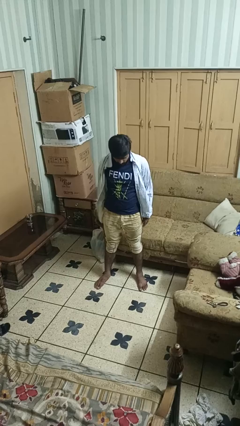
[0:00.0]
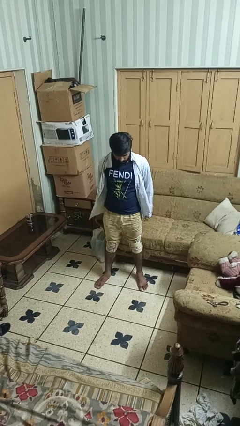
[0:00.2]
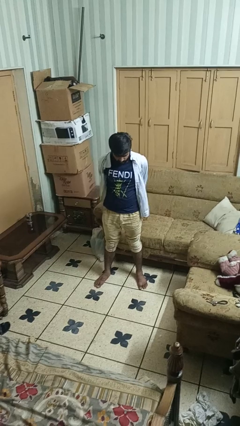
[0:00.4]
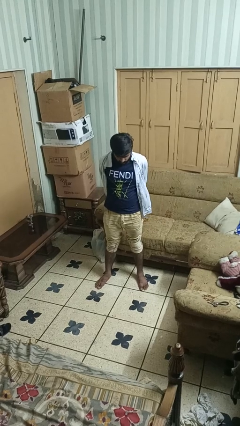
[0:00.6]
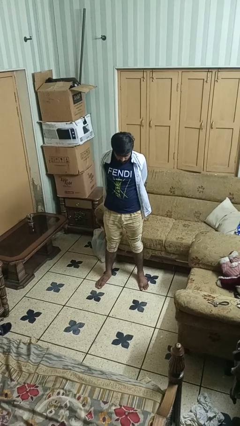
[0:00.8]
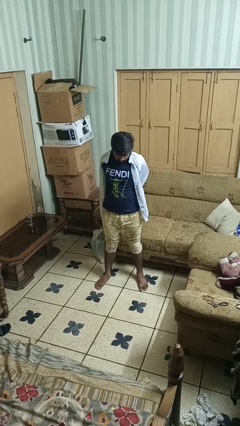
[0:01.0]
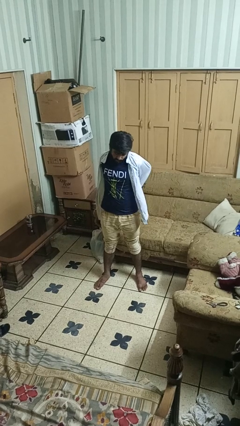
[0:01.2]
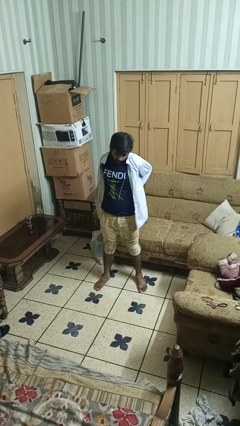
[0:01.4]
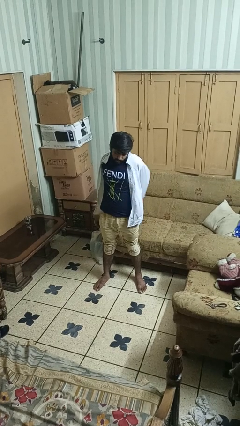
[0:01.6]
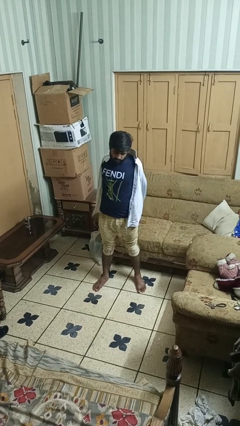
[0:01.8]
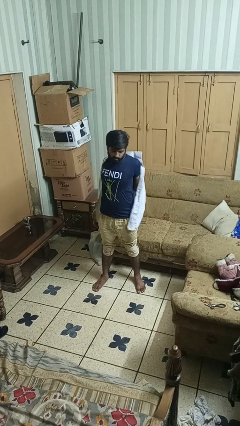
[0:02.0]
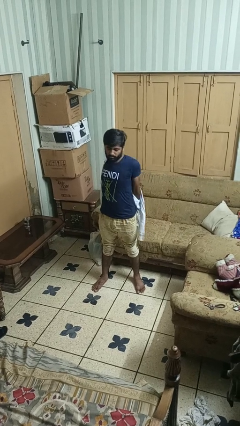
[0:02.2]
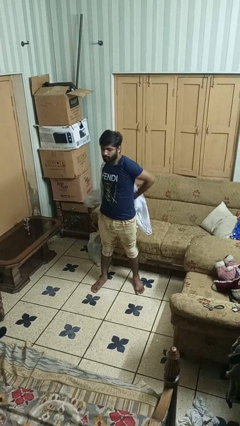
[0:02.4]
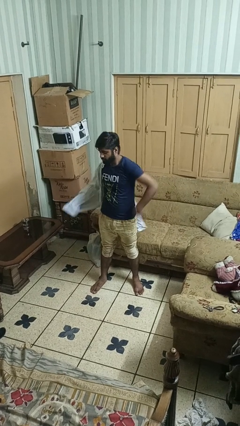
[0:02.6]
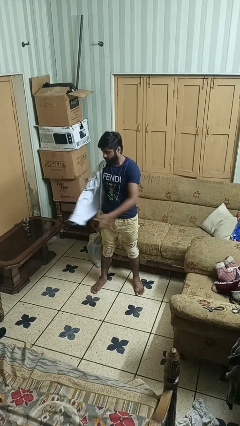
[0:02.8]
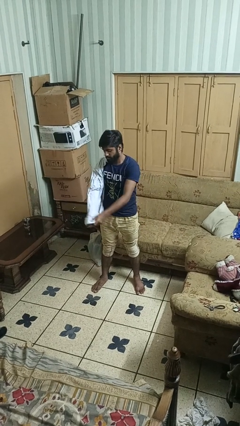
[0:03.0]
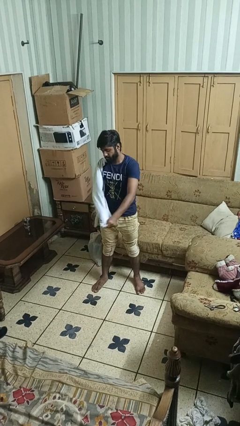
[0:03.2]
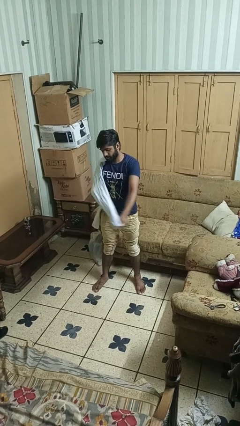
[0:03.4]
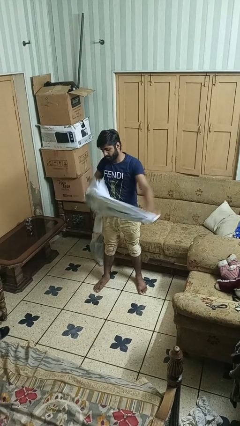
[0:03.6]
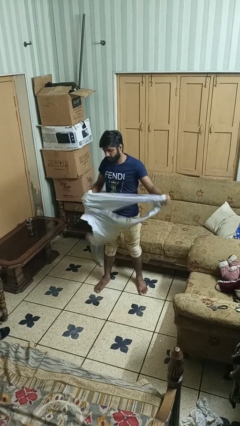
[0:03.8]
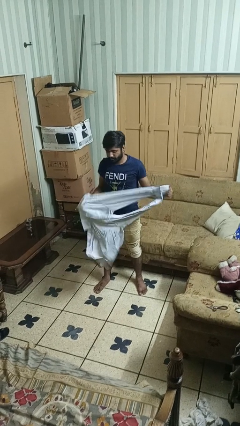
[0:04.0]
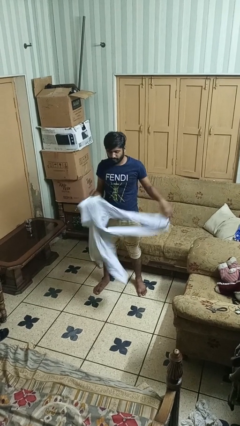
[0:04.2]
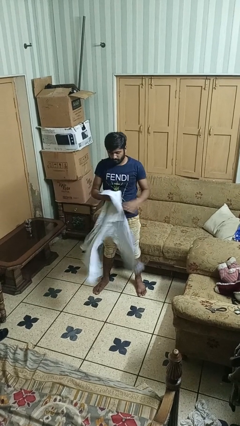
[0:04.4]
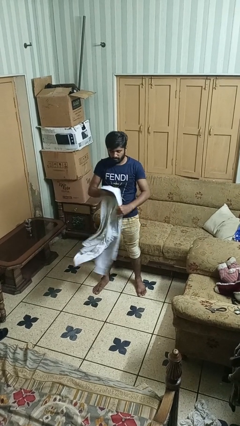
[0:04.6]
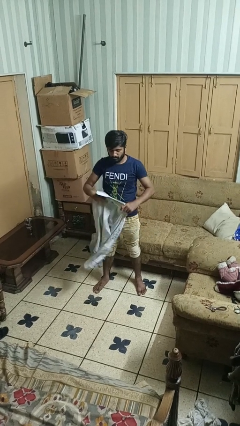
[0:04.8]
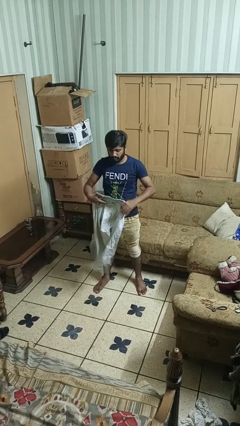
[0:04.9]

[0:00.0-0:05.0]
person takes off shirt

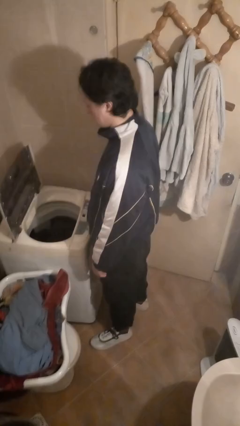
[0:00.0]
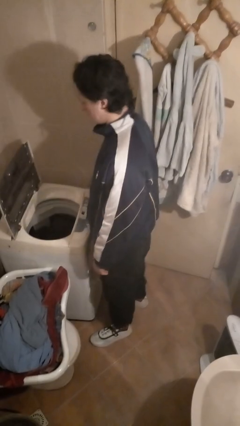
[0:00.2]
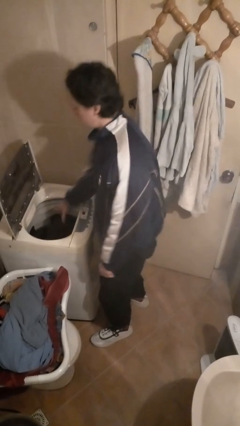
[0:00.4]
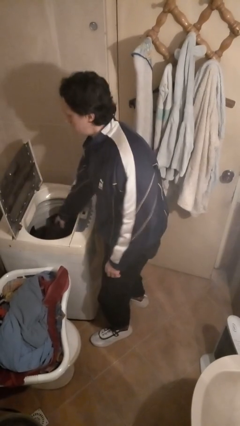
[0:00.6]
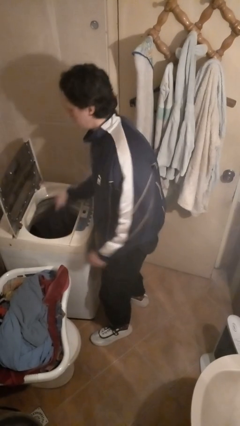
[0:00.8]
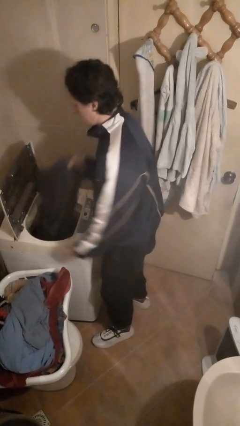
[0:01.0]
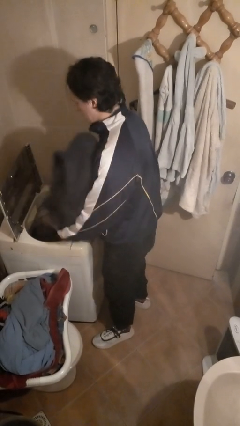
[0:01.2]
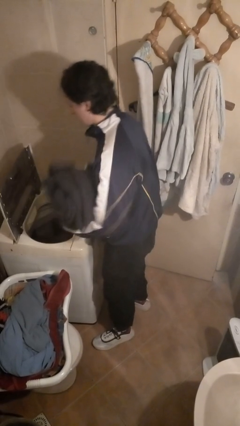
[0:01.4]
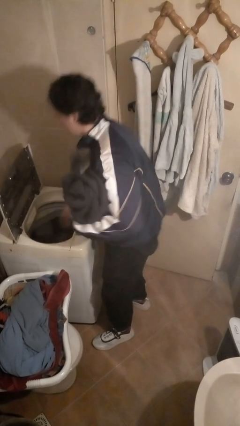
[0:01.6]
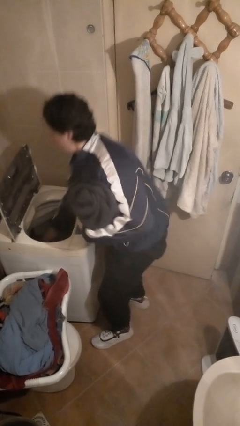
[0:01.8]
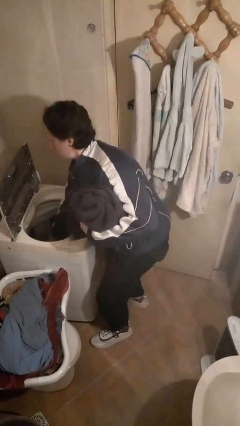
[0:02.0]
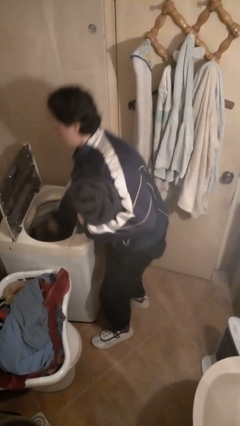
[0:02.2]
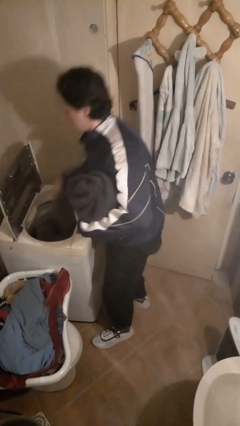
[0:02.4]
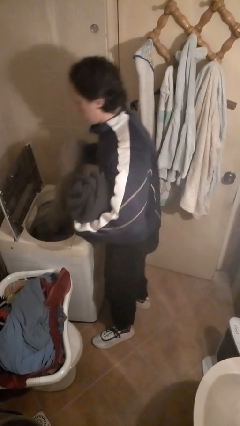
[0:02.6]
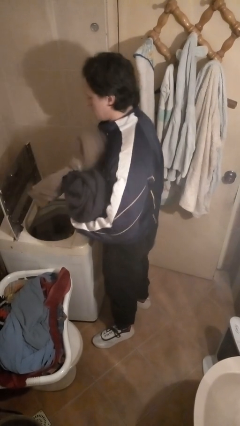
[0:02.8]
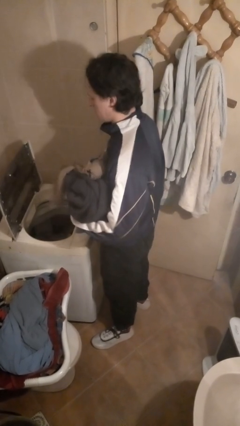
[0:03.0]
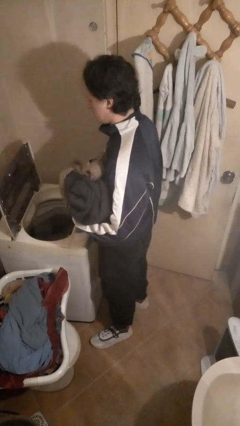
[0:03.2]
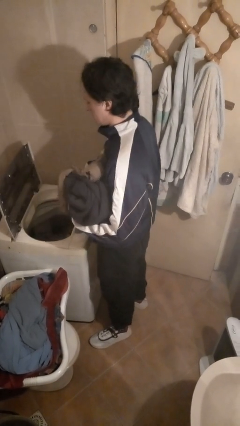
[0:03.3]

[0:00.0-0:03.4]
person loads clotheswasher

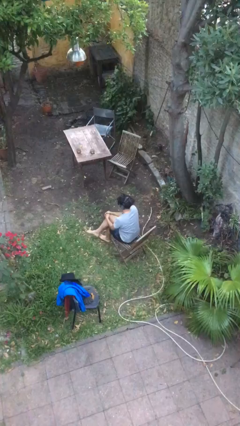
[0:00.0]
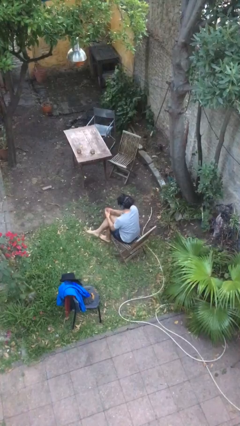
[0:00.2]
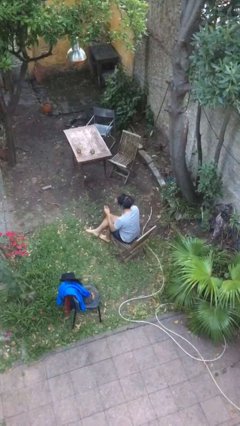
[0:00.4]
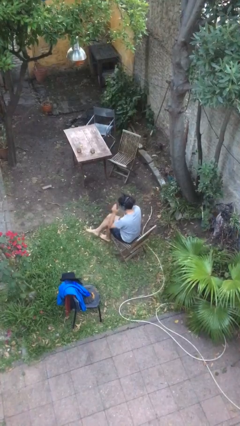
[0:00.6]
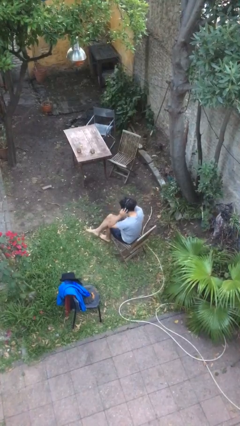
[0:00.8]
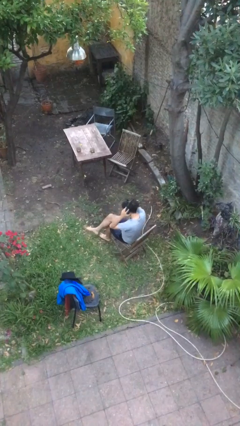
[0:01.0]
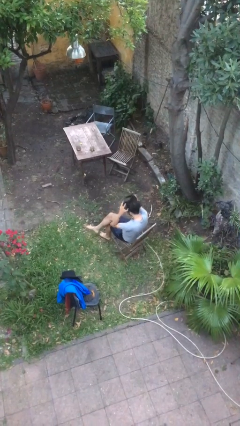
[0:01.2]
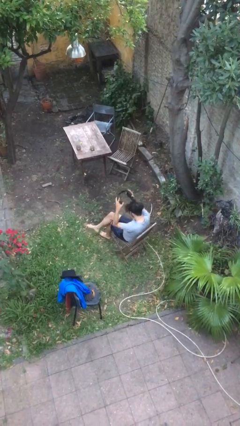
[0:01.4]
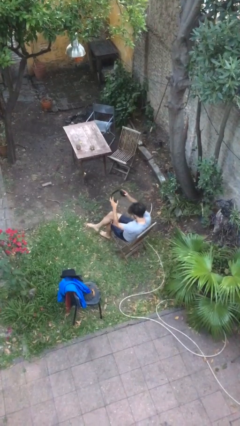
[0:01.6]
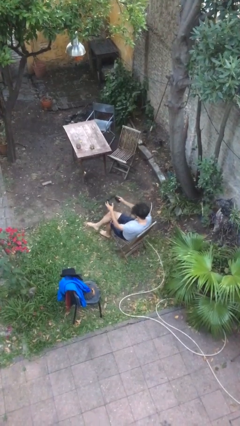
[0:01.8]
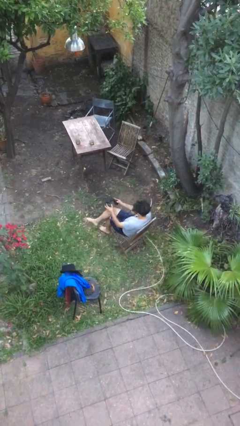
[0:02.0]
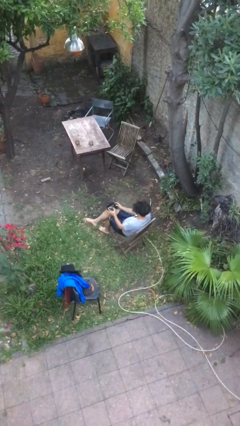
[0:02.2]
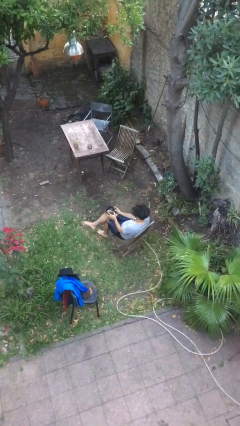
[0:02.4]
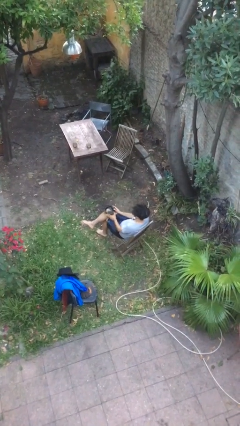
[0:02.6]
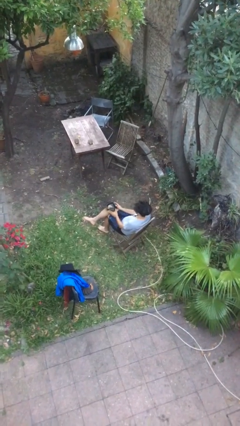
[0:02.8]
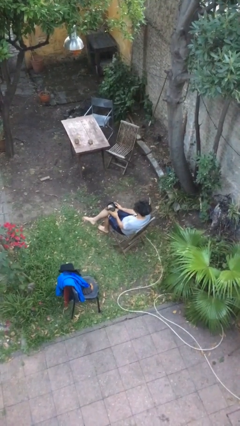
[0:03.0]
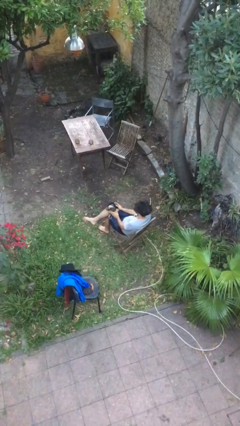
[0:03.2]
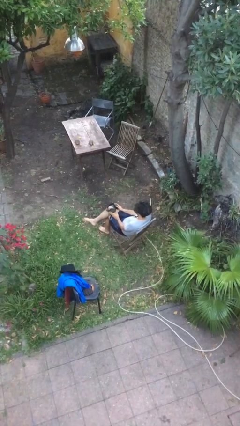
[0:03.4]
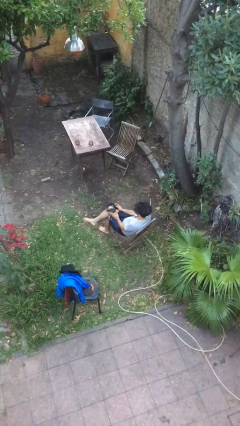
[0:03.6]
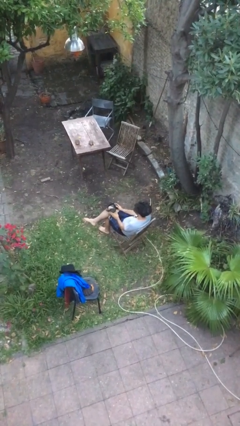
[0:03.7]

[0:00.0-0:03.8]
person takes off headphones

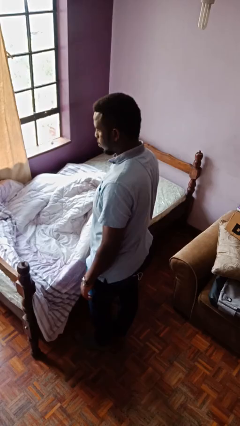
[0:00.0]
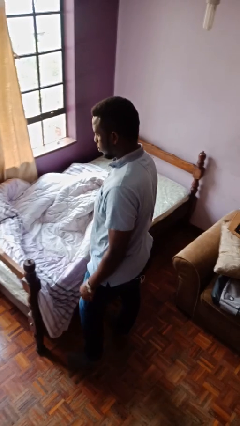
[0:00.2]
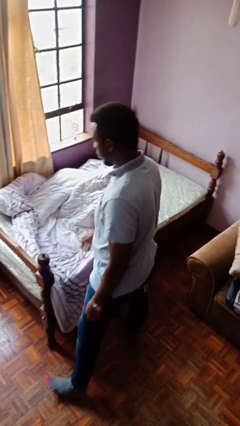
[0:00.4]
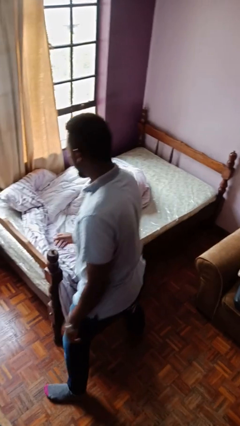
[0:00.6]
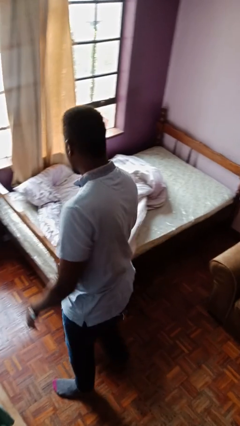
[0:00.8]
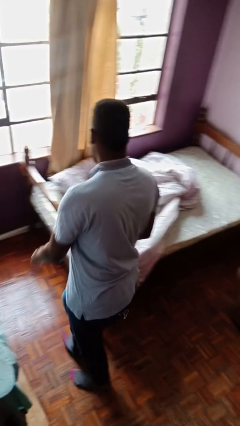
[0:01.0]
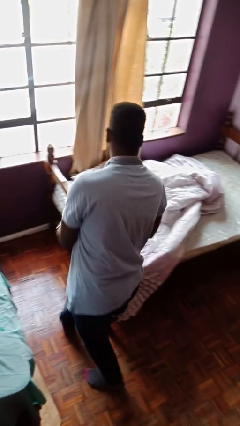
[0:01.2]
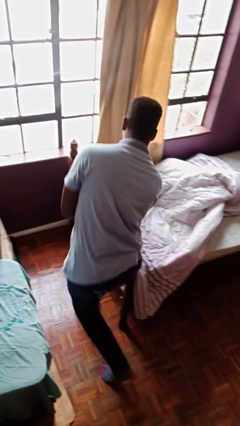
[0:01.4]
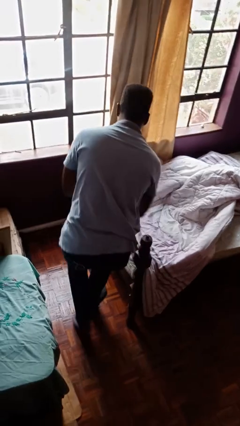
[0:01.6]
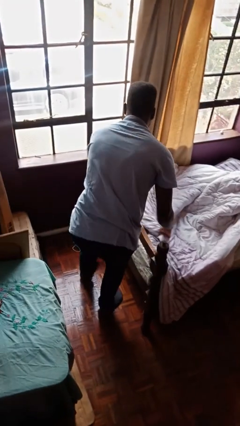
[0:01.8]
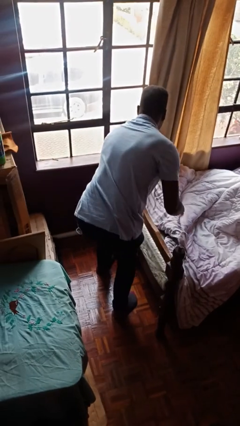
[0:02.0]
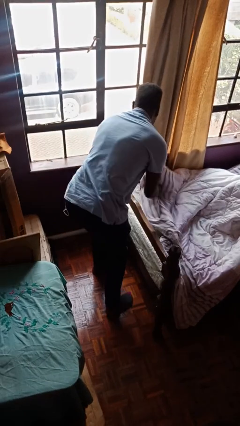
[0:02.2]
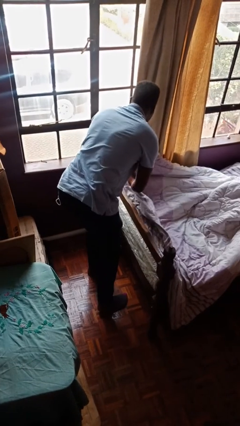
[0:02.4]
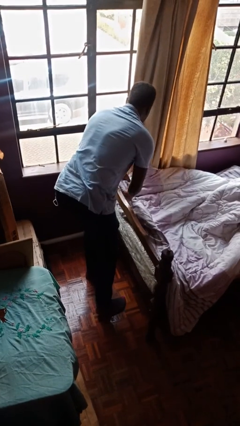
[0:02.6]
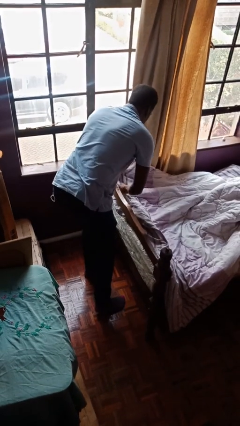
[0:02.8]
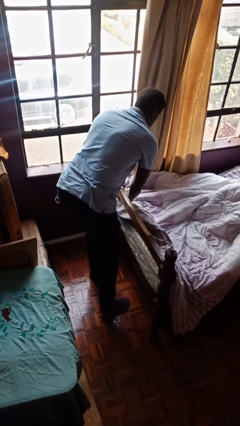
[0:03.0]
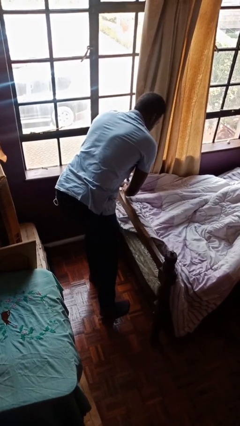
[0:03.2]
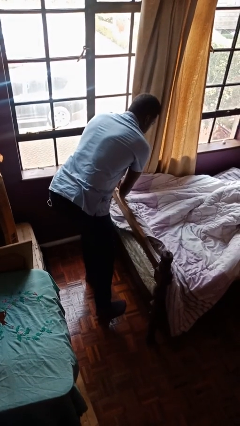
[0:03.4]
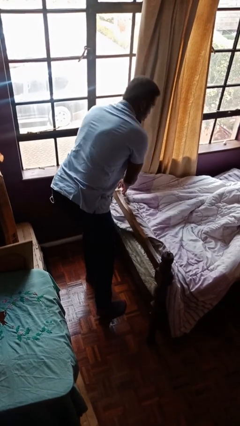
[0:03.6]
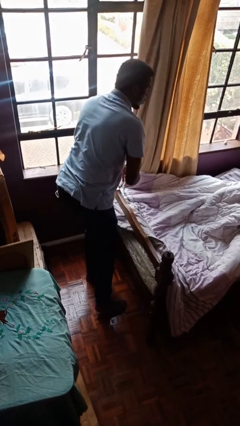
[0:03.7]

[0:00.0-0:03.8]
person makes bed

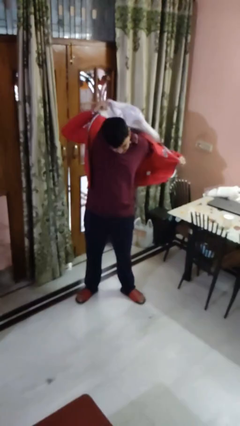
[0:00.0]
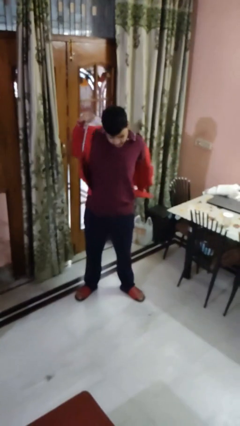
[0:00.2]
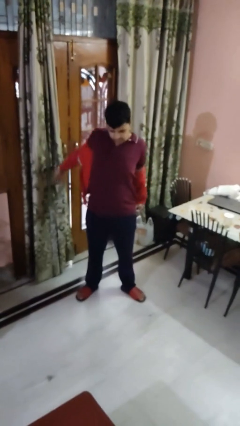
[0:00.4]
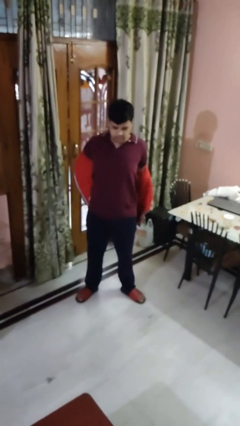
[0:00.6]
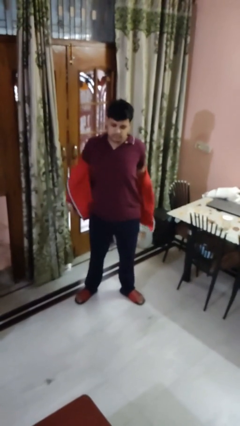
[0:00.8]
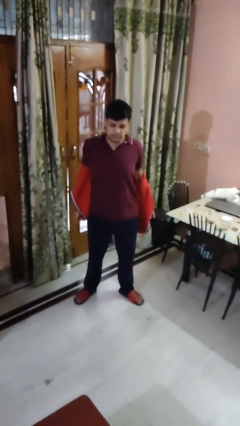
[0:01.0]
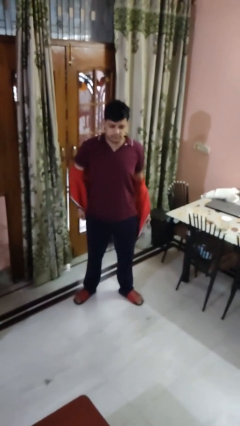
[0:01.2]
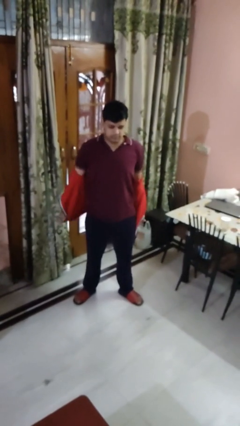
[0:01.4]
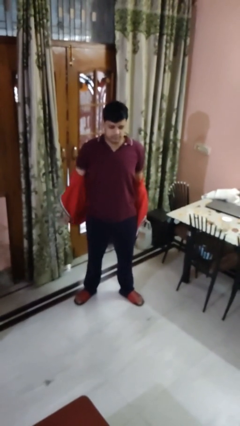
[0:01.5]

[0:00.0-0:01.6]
person takes off hoodie
